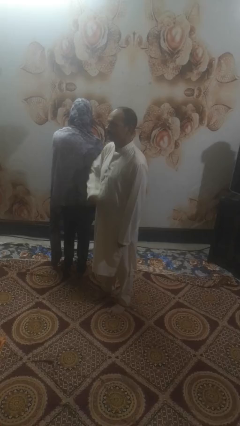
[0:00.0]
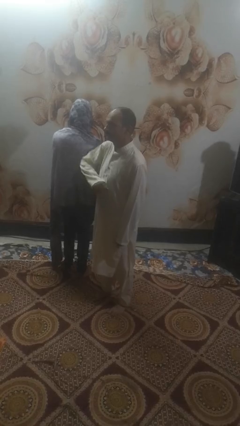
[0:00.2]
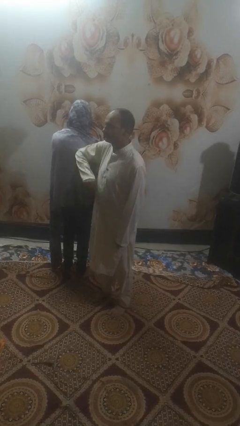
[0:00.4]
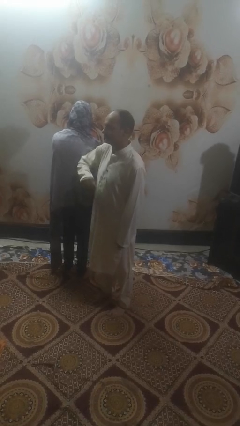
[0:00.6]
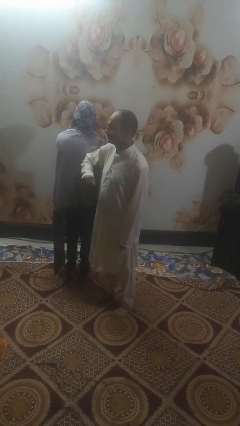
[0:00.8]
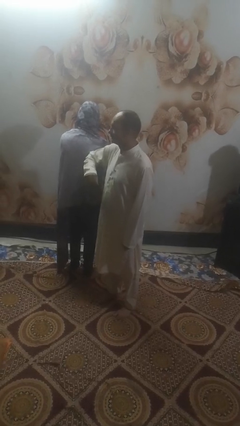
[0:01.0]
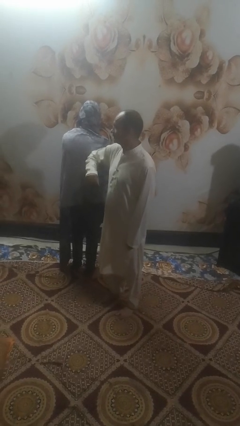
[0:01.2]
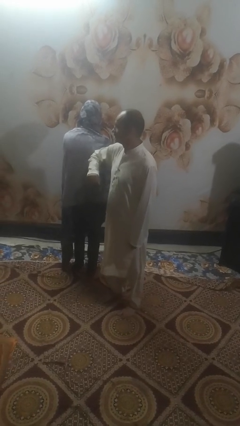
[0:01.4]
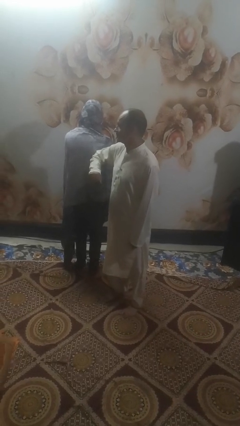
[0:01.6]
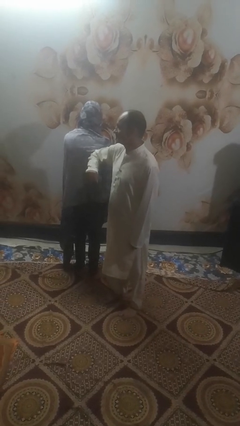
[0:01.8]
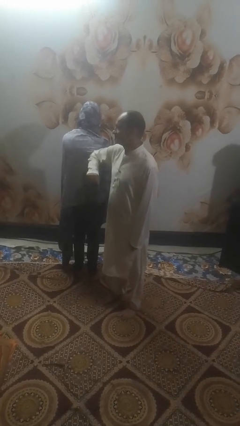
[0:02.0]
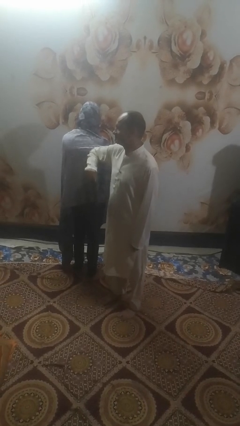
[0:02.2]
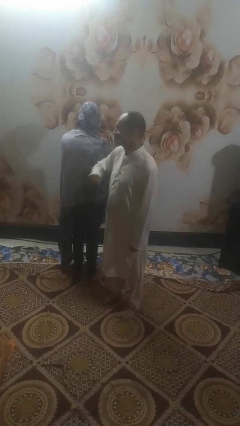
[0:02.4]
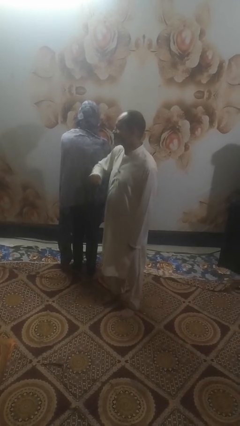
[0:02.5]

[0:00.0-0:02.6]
person nudges person with elbow

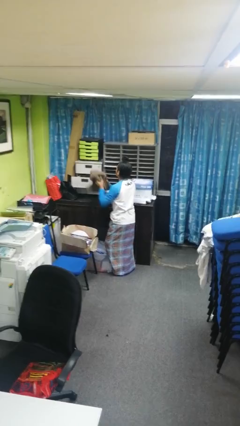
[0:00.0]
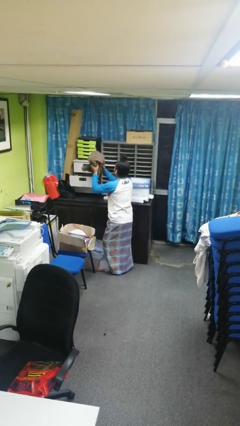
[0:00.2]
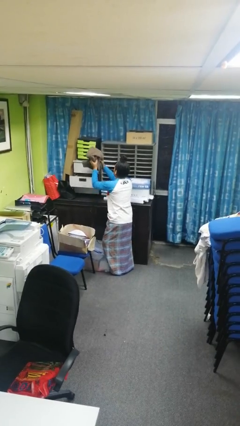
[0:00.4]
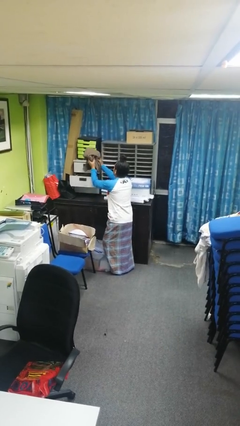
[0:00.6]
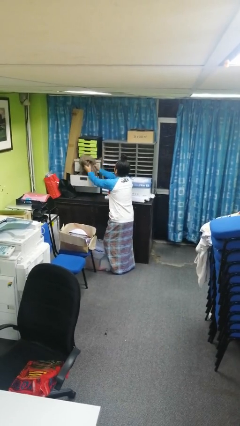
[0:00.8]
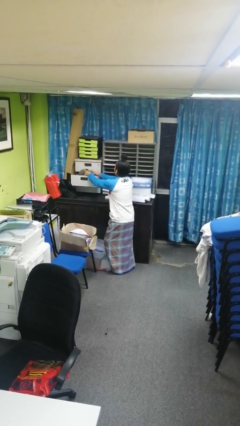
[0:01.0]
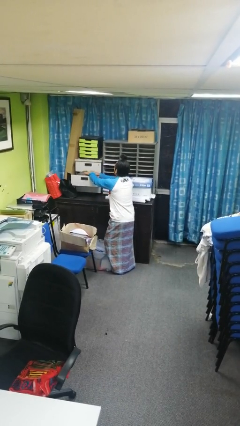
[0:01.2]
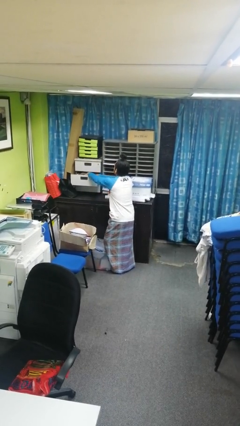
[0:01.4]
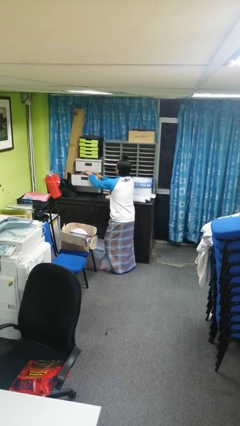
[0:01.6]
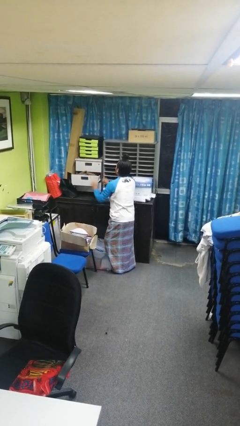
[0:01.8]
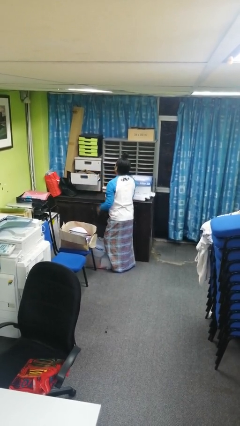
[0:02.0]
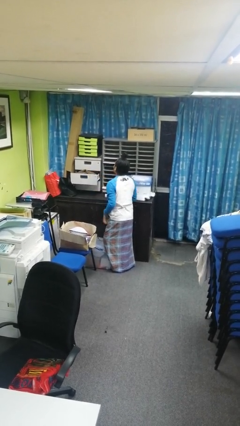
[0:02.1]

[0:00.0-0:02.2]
person puts clothes into dresser

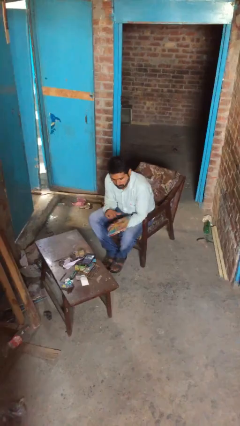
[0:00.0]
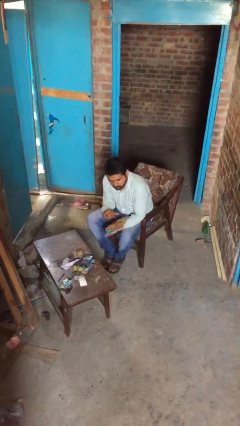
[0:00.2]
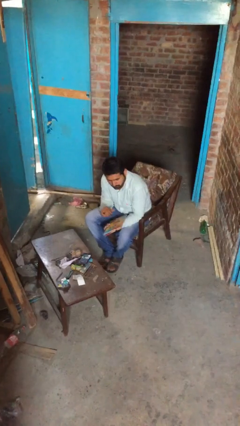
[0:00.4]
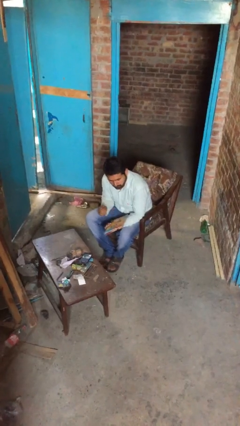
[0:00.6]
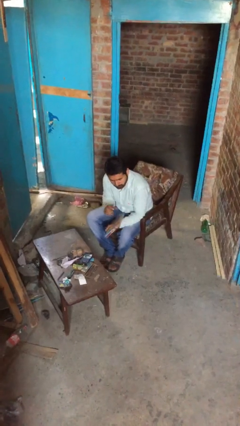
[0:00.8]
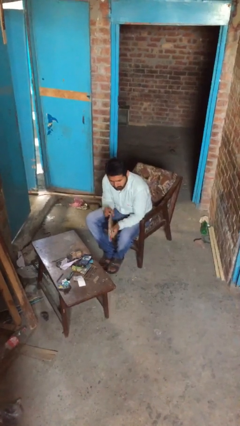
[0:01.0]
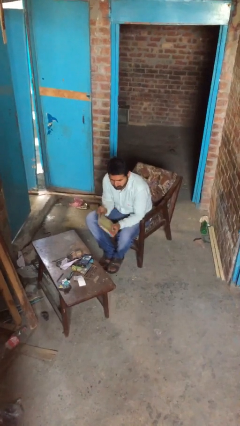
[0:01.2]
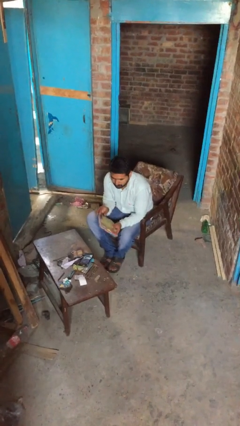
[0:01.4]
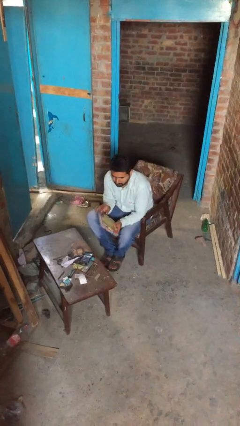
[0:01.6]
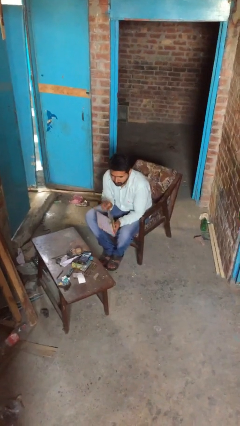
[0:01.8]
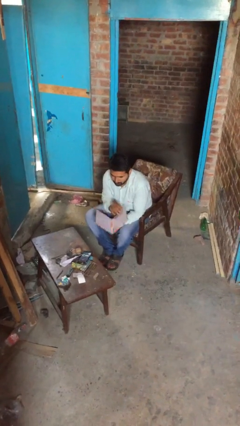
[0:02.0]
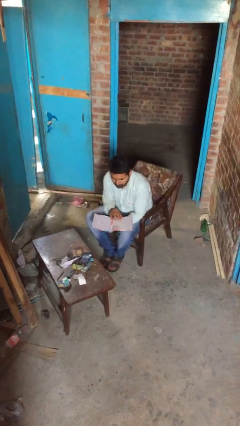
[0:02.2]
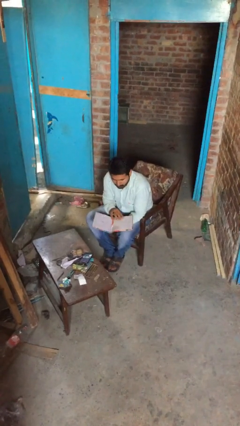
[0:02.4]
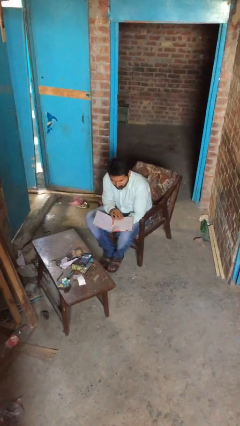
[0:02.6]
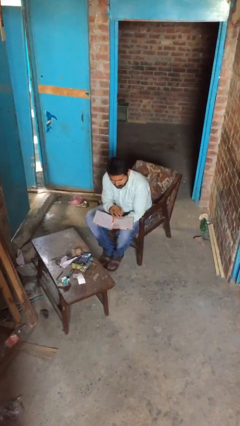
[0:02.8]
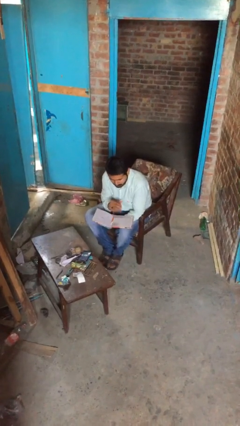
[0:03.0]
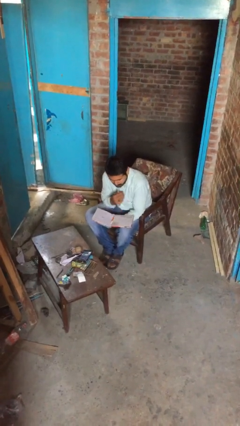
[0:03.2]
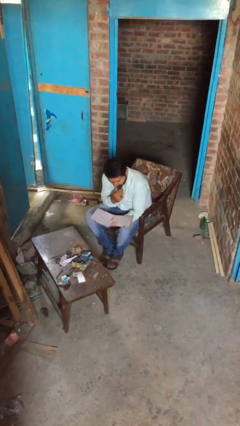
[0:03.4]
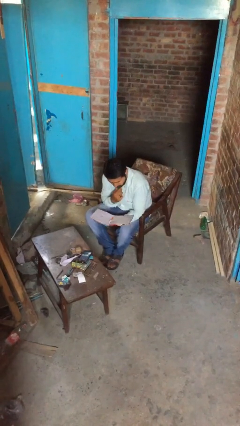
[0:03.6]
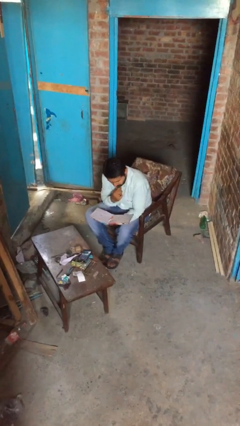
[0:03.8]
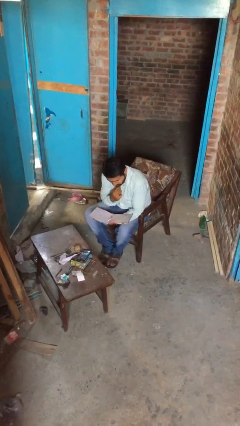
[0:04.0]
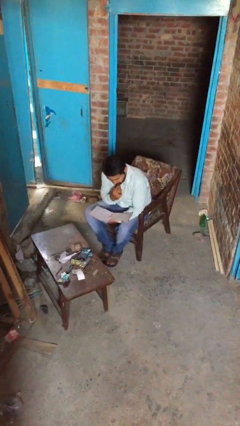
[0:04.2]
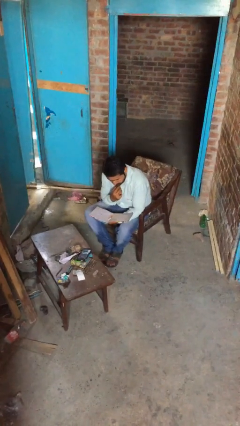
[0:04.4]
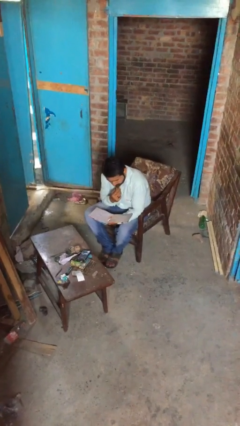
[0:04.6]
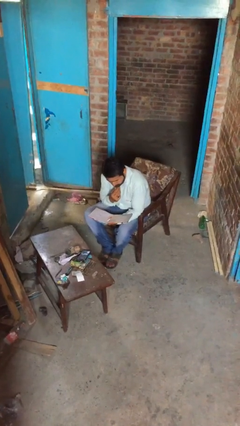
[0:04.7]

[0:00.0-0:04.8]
person reads document

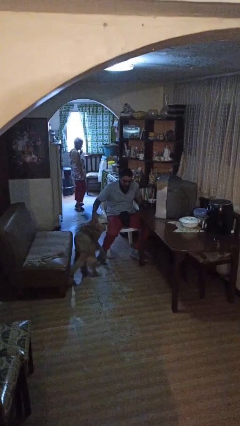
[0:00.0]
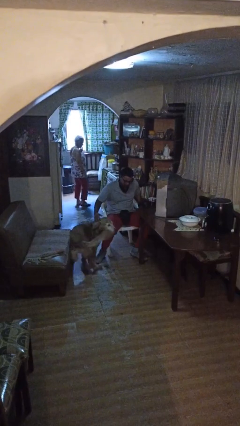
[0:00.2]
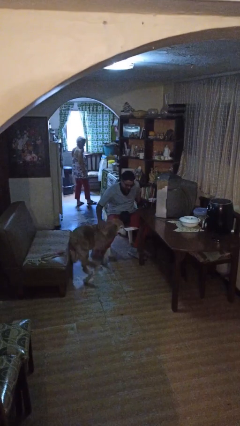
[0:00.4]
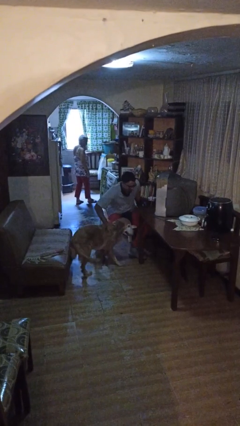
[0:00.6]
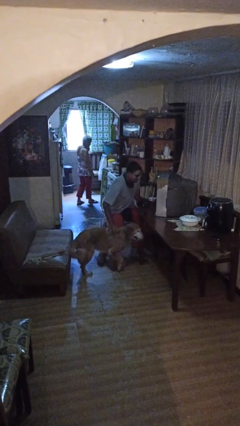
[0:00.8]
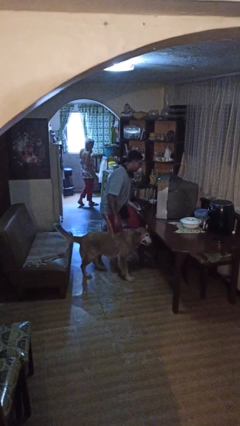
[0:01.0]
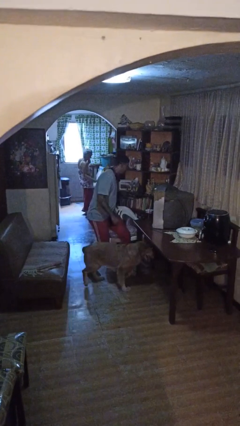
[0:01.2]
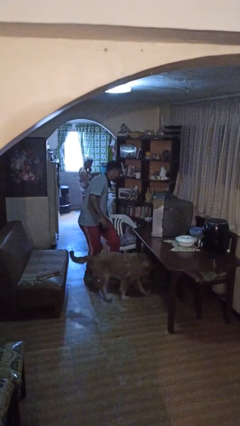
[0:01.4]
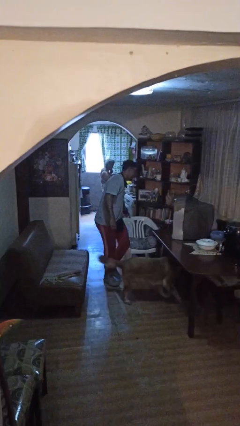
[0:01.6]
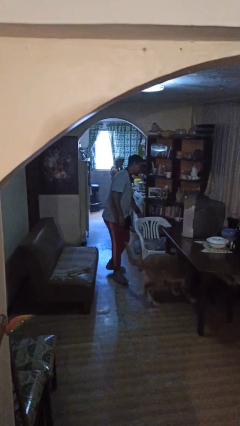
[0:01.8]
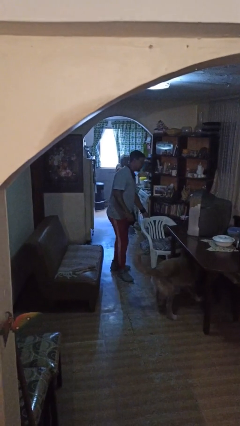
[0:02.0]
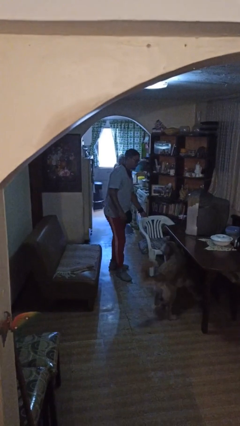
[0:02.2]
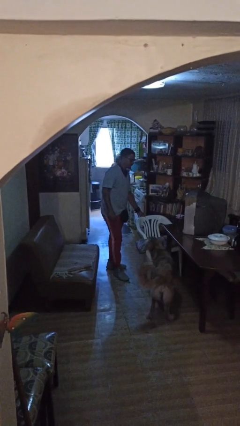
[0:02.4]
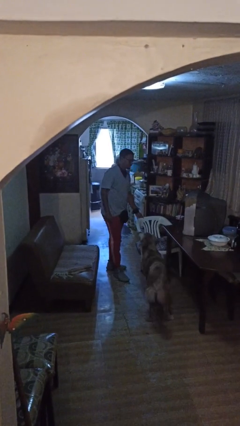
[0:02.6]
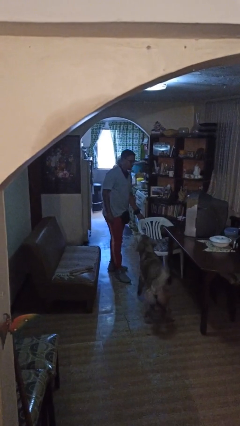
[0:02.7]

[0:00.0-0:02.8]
person stands up

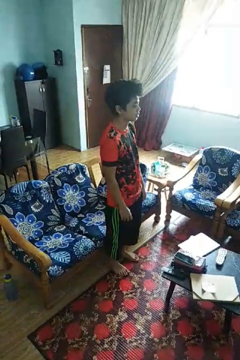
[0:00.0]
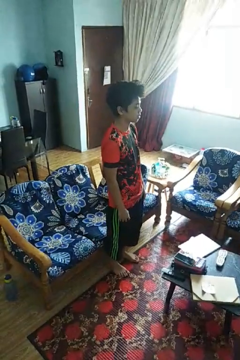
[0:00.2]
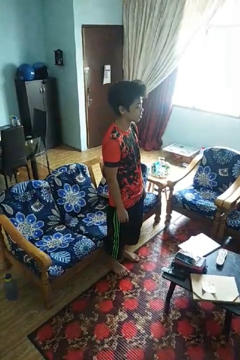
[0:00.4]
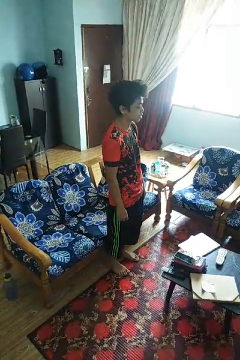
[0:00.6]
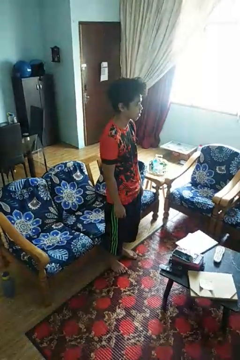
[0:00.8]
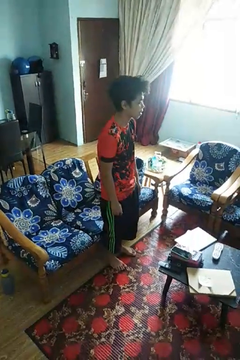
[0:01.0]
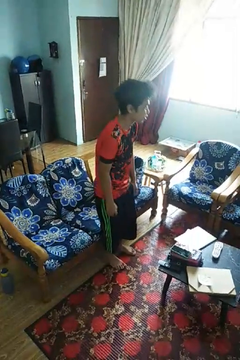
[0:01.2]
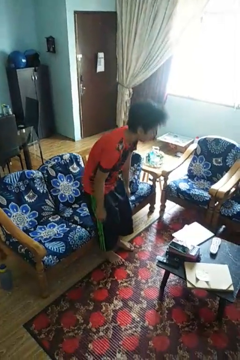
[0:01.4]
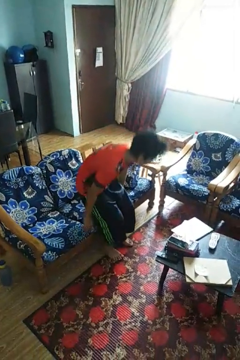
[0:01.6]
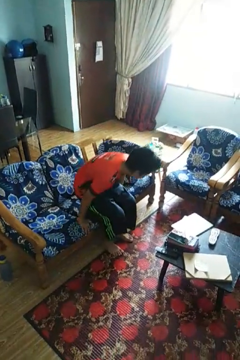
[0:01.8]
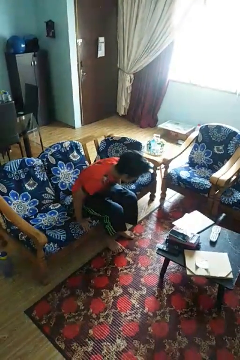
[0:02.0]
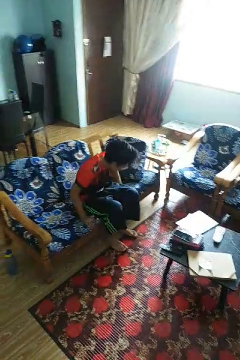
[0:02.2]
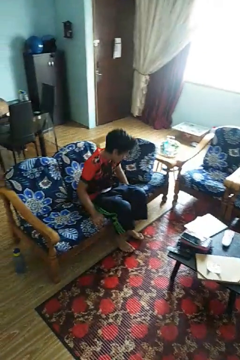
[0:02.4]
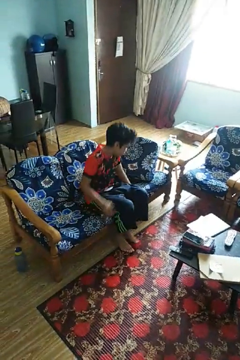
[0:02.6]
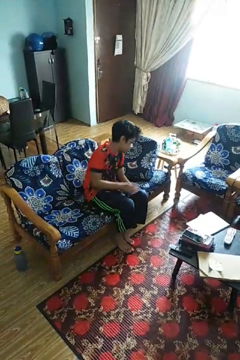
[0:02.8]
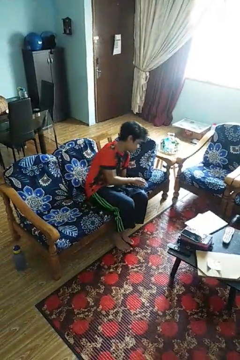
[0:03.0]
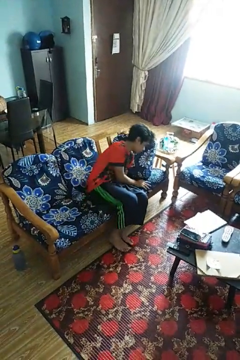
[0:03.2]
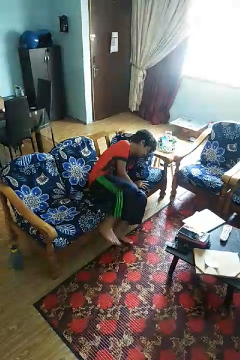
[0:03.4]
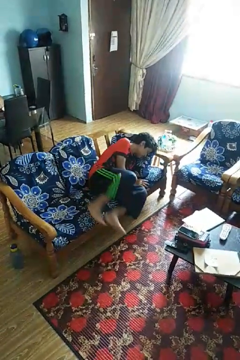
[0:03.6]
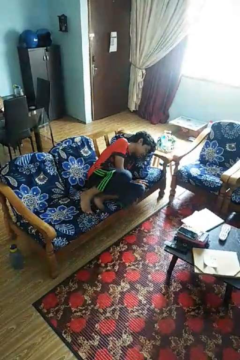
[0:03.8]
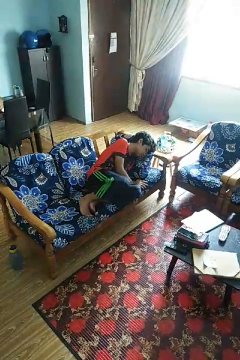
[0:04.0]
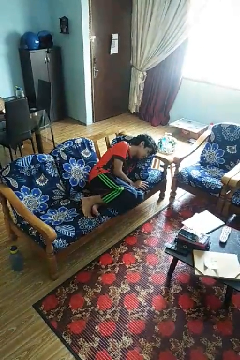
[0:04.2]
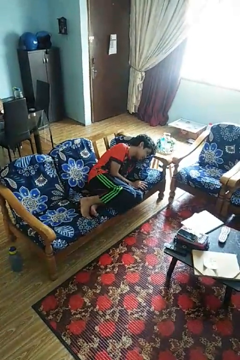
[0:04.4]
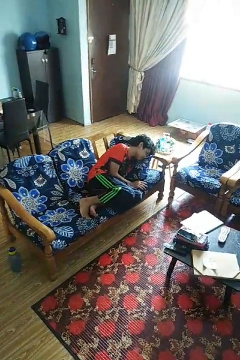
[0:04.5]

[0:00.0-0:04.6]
person lies down on couch

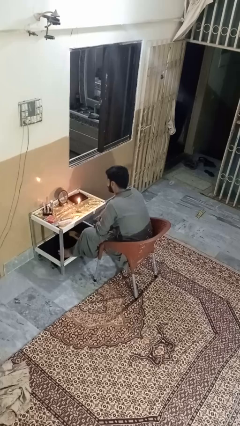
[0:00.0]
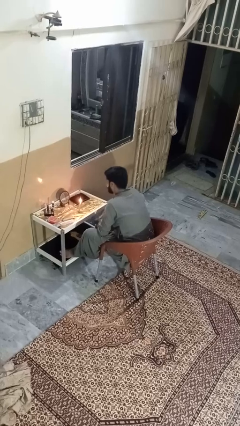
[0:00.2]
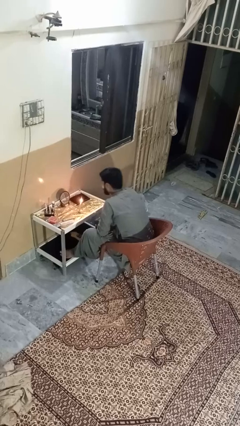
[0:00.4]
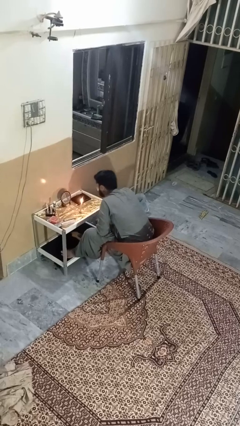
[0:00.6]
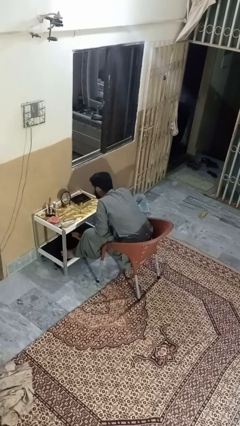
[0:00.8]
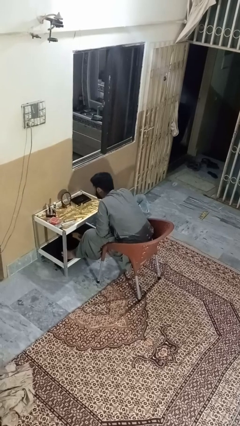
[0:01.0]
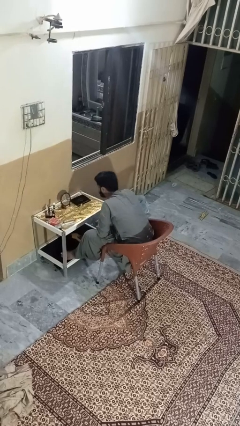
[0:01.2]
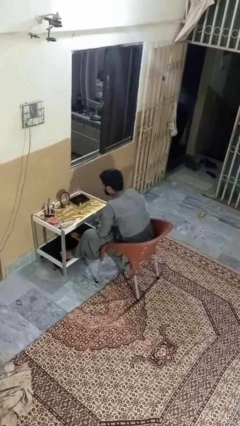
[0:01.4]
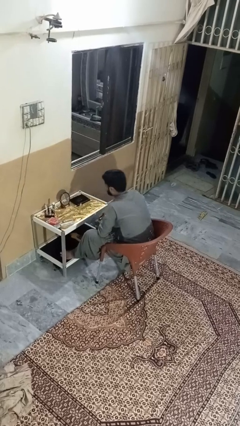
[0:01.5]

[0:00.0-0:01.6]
person extinguishes candle
